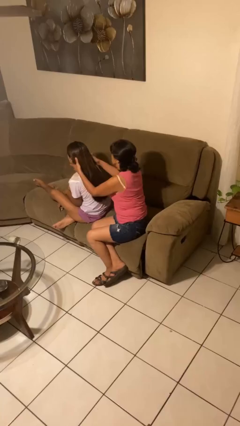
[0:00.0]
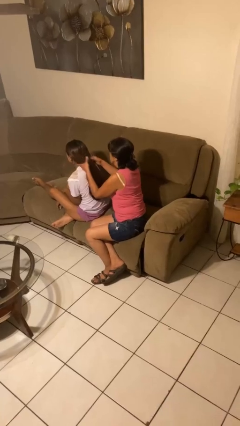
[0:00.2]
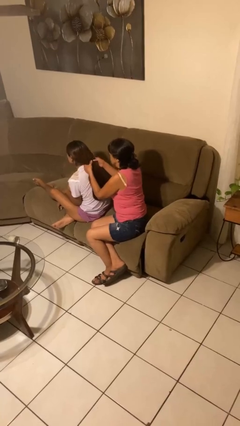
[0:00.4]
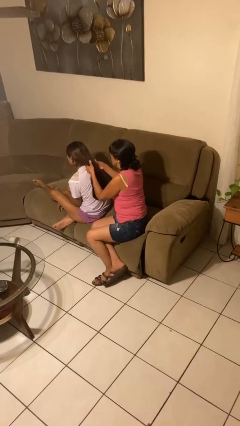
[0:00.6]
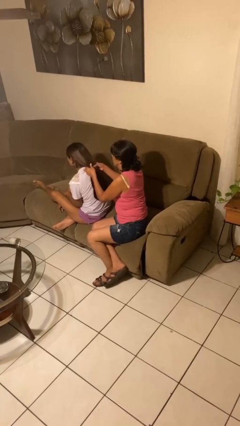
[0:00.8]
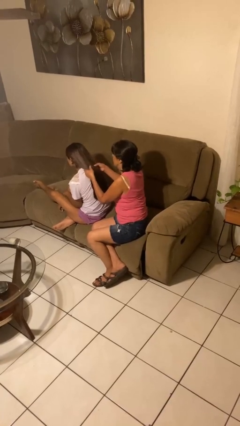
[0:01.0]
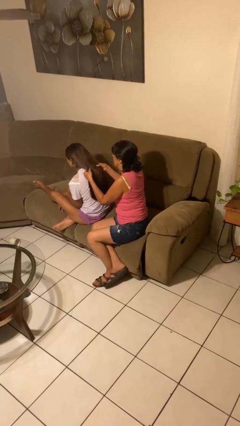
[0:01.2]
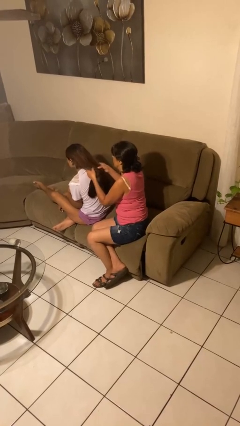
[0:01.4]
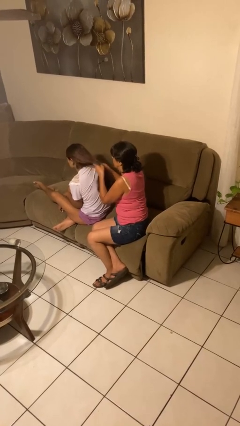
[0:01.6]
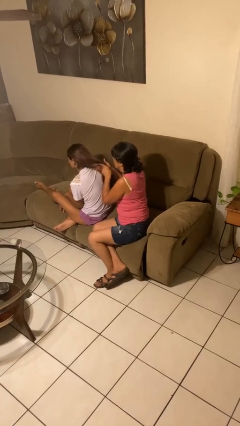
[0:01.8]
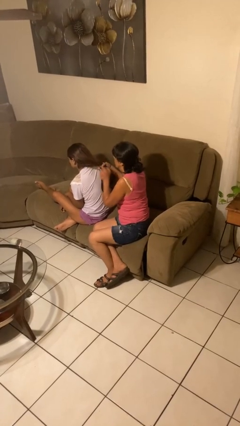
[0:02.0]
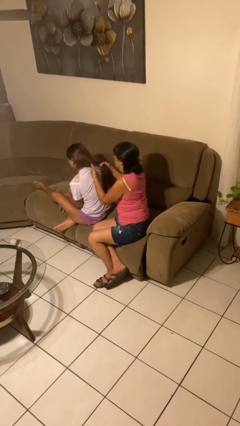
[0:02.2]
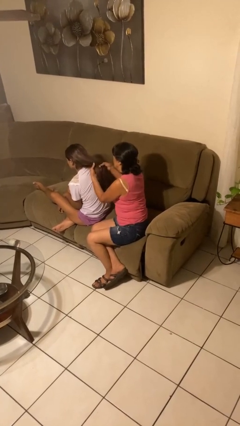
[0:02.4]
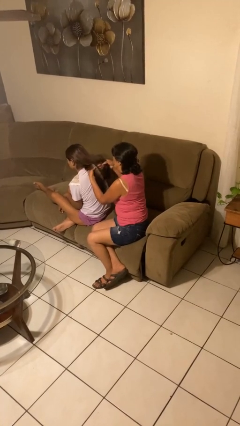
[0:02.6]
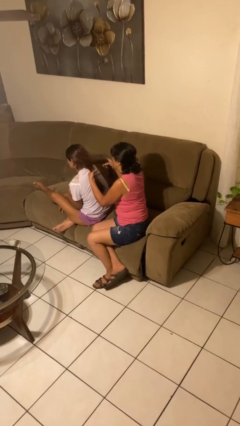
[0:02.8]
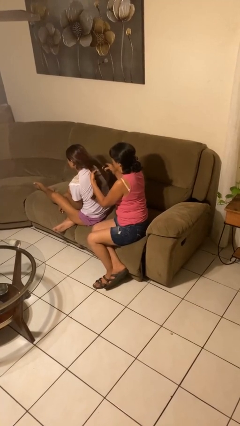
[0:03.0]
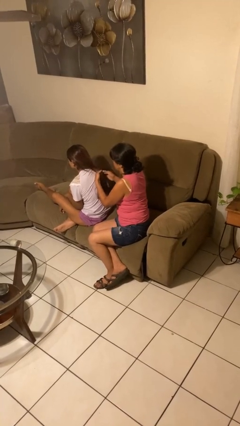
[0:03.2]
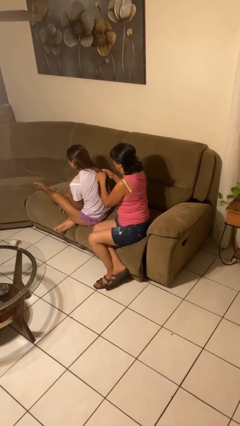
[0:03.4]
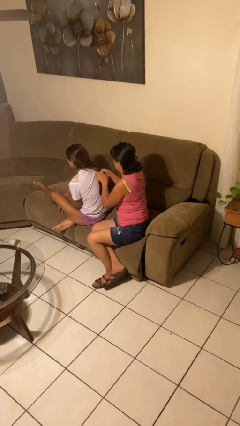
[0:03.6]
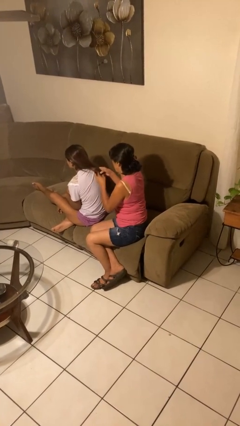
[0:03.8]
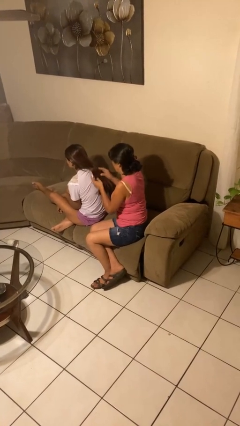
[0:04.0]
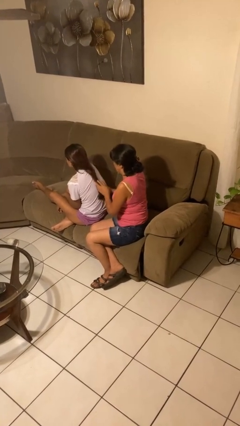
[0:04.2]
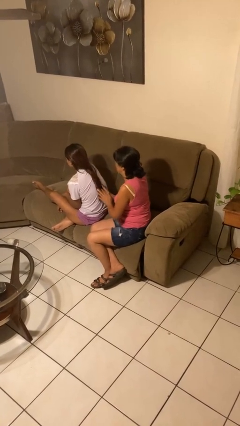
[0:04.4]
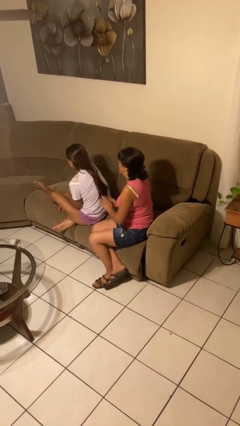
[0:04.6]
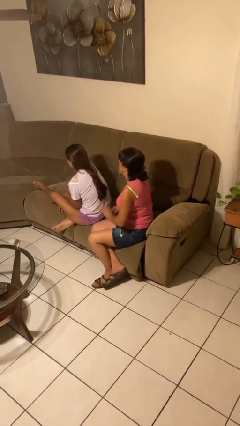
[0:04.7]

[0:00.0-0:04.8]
person braids hair of person

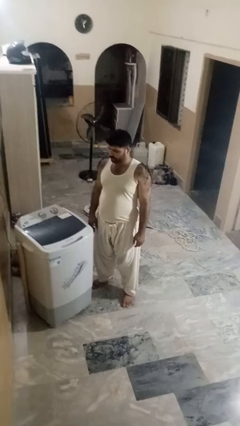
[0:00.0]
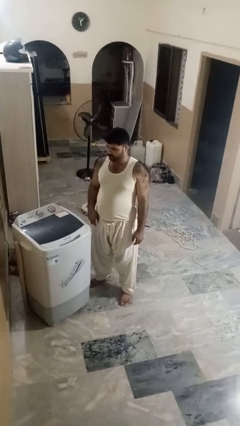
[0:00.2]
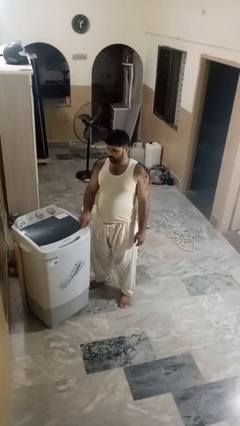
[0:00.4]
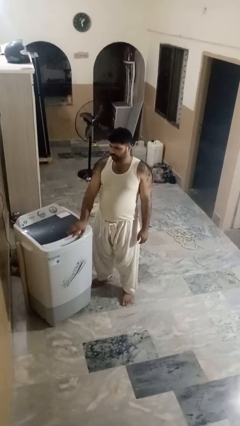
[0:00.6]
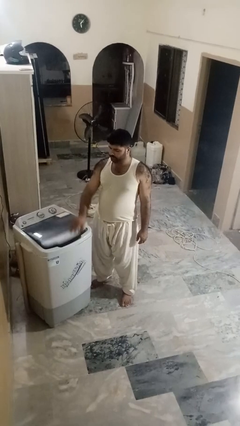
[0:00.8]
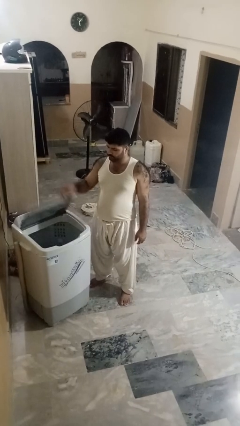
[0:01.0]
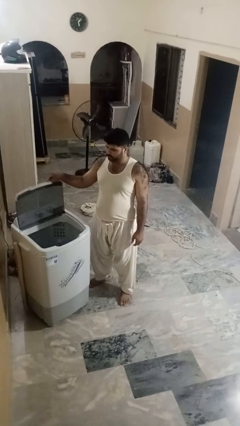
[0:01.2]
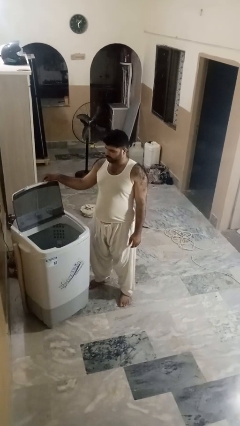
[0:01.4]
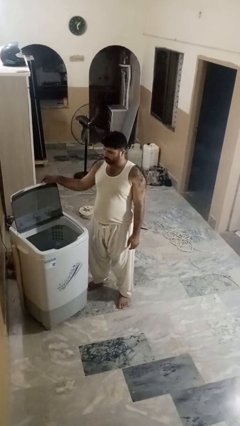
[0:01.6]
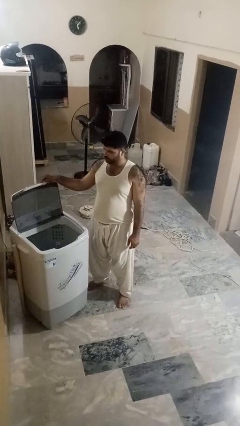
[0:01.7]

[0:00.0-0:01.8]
person opens clothes washer

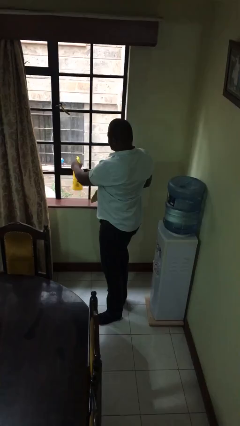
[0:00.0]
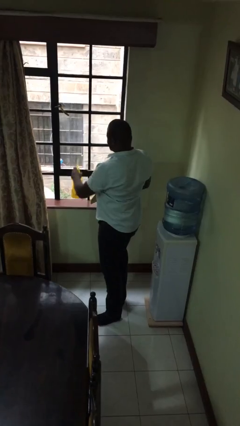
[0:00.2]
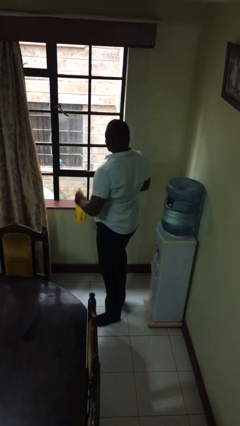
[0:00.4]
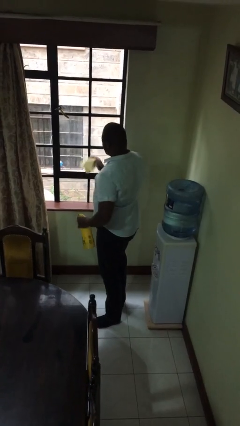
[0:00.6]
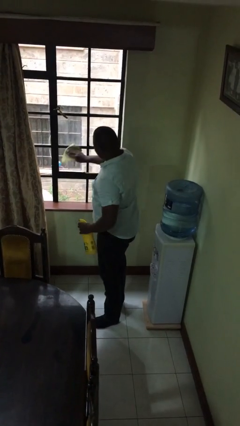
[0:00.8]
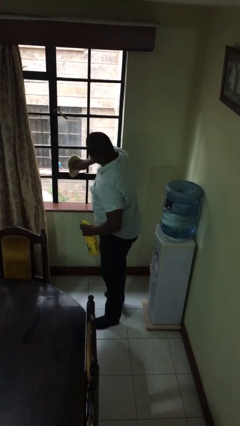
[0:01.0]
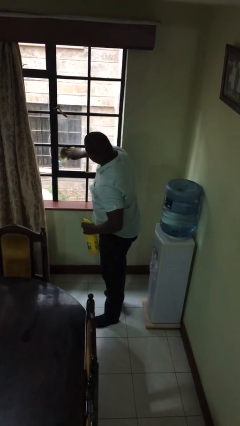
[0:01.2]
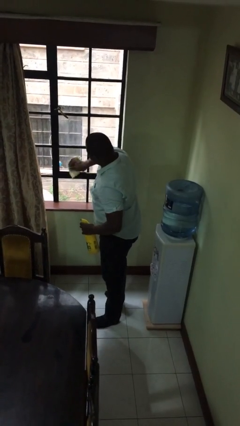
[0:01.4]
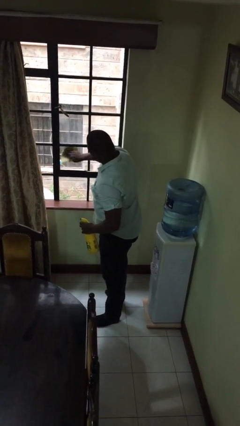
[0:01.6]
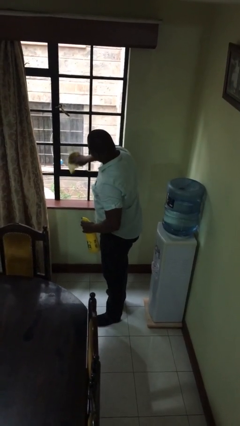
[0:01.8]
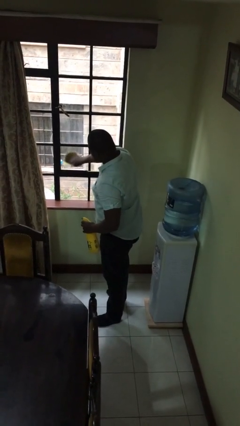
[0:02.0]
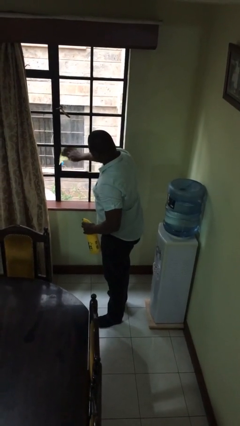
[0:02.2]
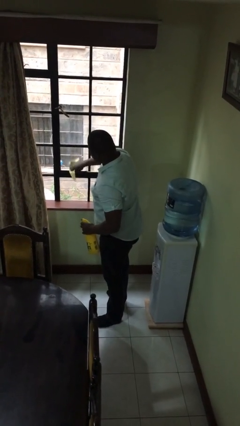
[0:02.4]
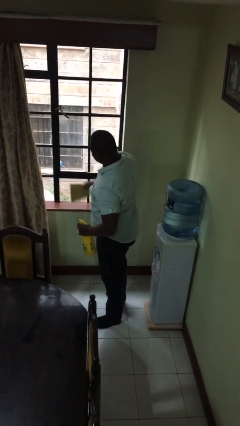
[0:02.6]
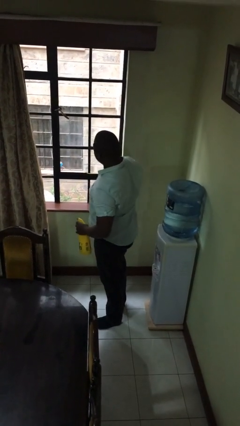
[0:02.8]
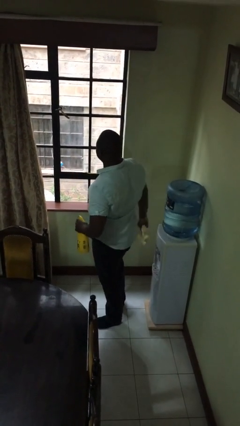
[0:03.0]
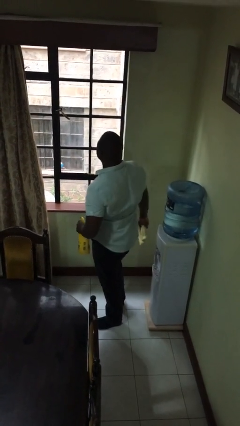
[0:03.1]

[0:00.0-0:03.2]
person washes window

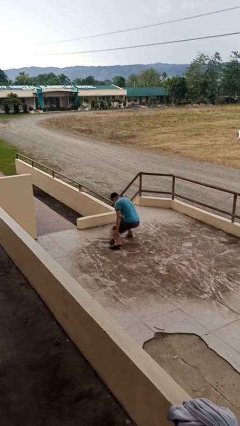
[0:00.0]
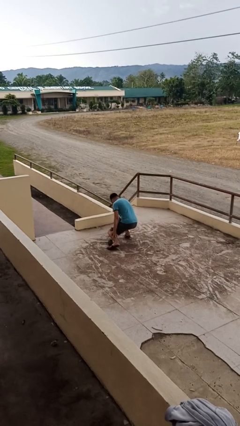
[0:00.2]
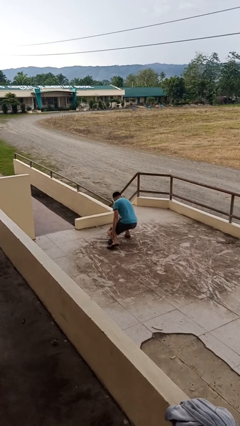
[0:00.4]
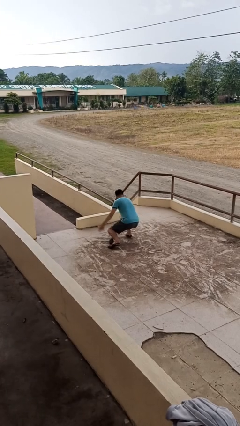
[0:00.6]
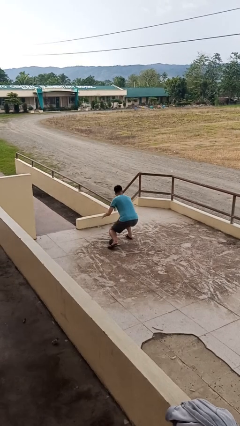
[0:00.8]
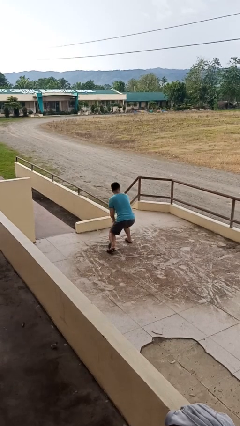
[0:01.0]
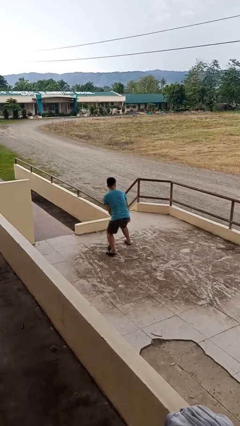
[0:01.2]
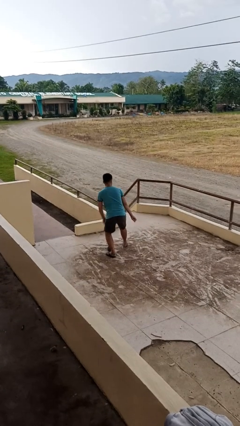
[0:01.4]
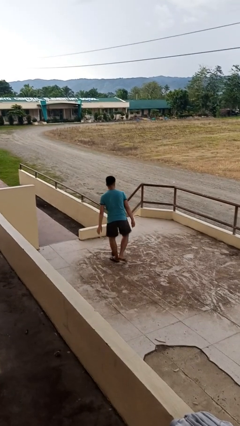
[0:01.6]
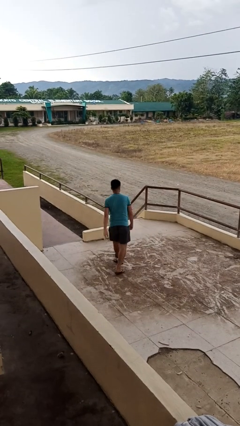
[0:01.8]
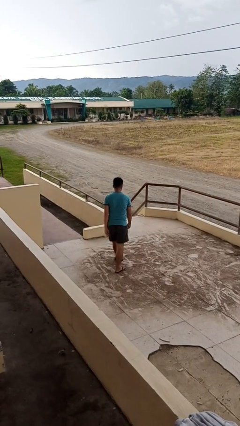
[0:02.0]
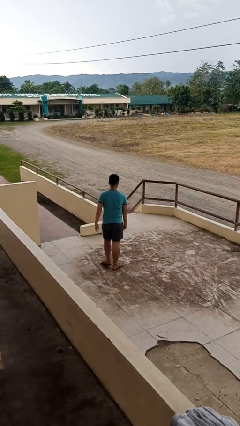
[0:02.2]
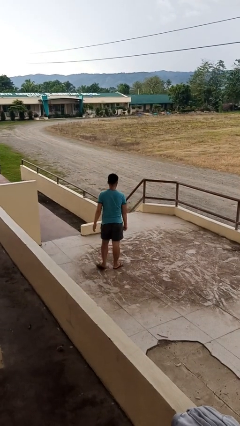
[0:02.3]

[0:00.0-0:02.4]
person stands up from floor

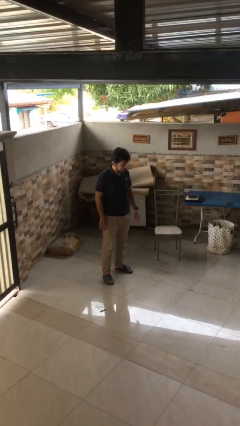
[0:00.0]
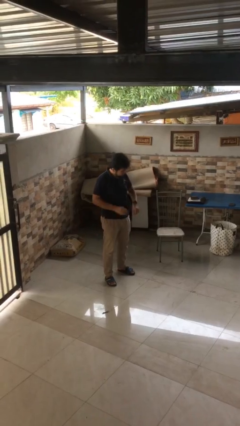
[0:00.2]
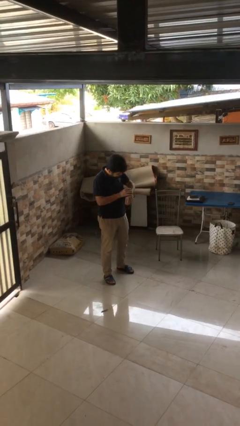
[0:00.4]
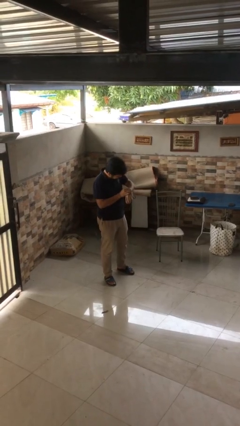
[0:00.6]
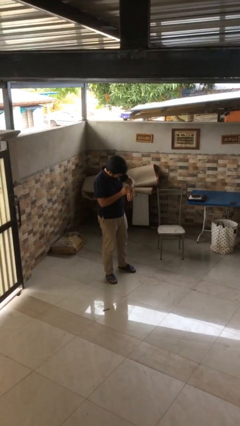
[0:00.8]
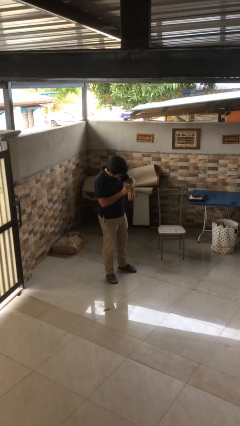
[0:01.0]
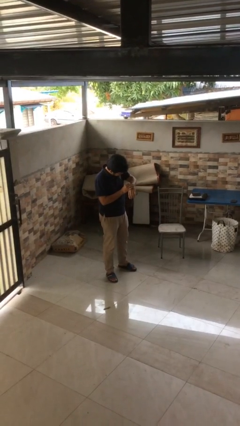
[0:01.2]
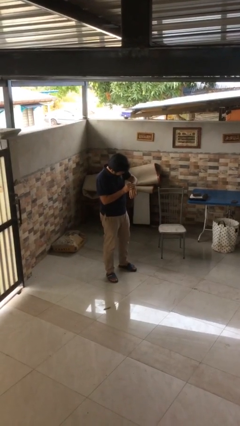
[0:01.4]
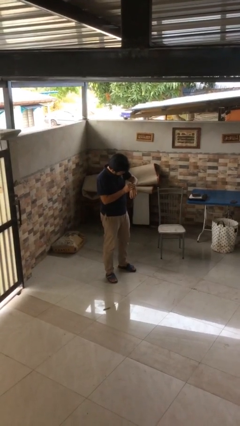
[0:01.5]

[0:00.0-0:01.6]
person looks at wristwatch

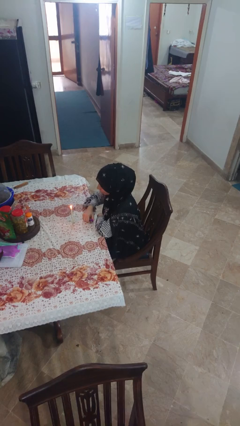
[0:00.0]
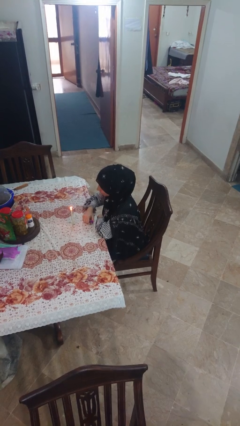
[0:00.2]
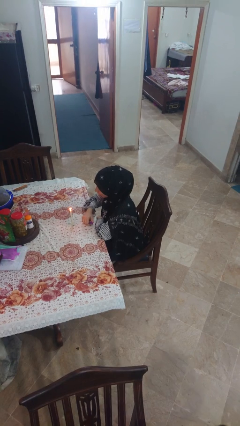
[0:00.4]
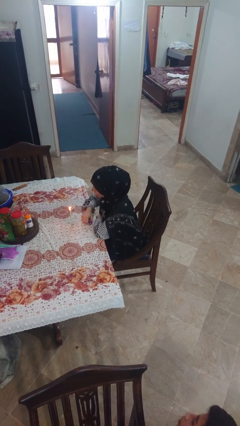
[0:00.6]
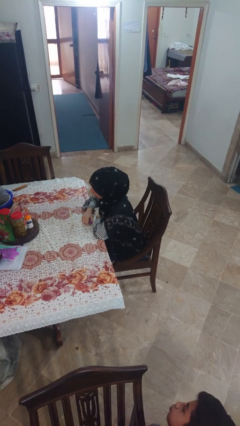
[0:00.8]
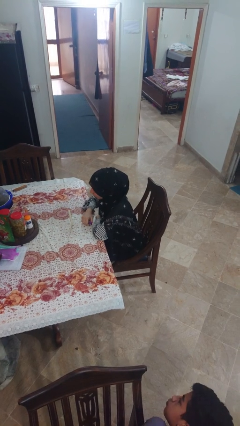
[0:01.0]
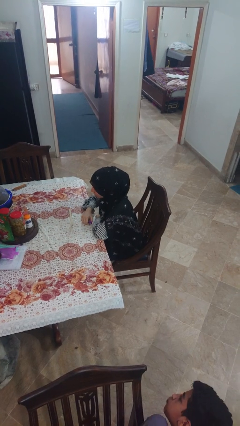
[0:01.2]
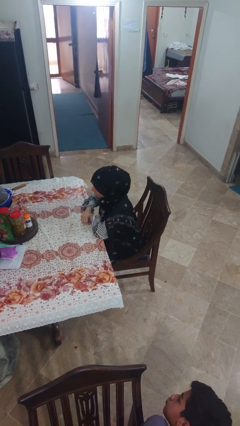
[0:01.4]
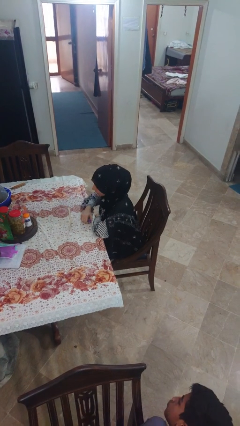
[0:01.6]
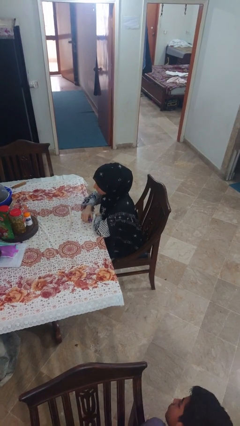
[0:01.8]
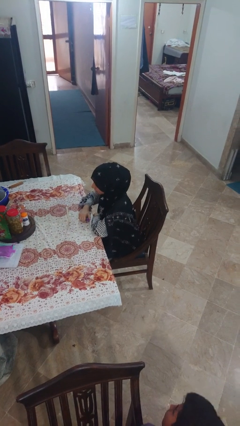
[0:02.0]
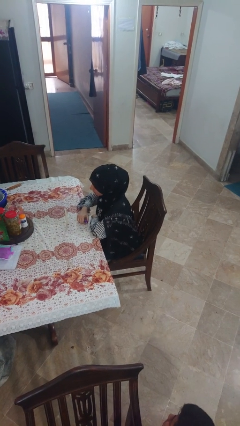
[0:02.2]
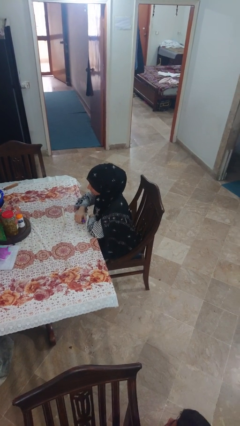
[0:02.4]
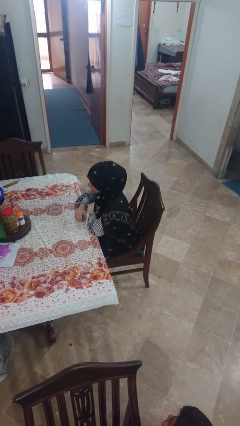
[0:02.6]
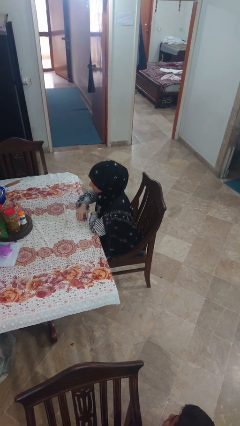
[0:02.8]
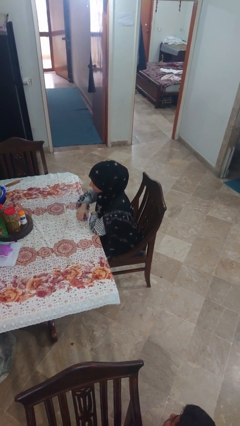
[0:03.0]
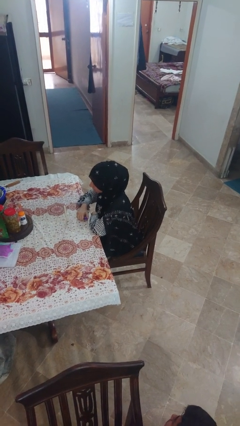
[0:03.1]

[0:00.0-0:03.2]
person extinguishes candle
